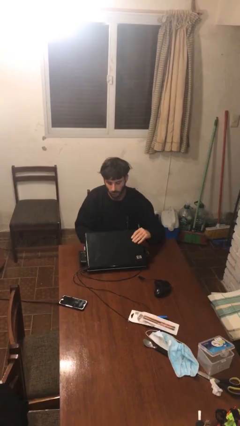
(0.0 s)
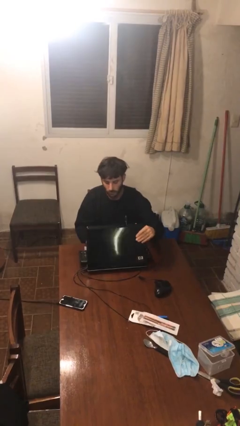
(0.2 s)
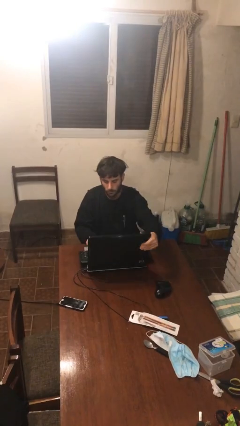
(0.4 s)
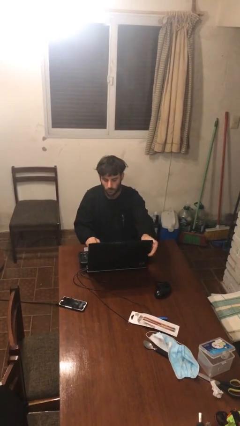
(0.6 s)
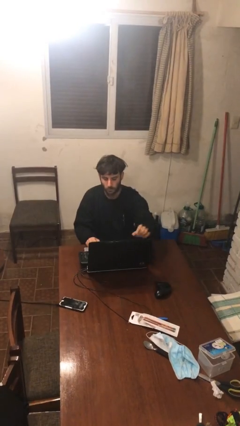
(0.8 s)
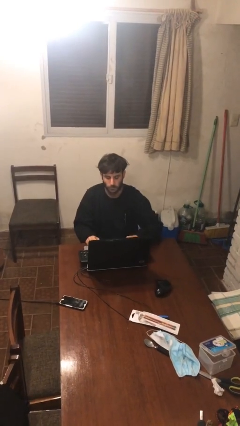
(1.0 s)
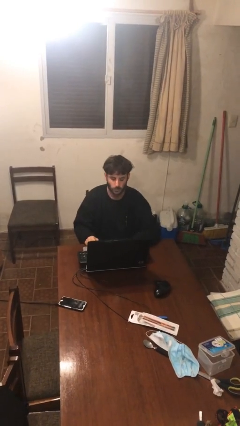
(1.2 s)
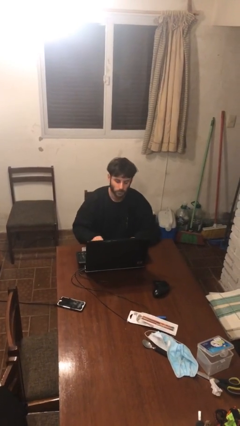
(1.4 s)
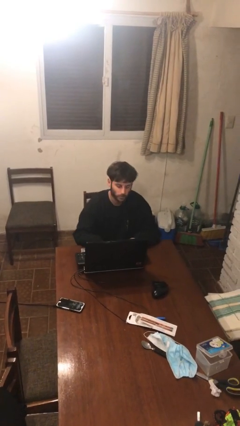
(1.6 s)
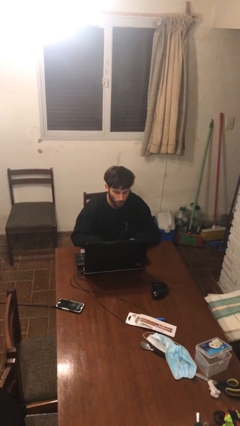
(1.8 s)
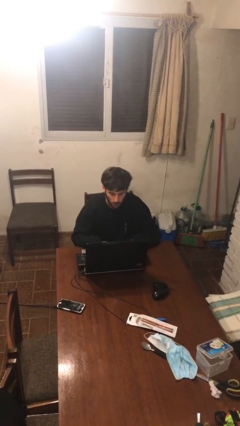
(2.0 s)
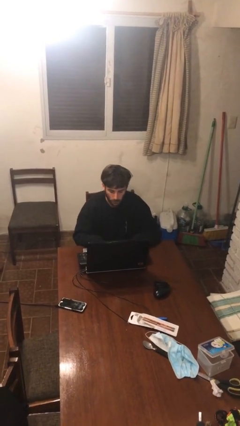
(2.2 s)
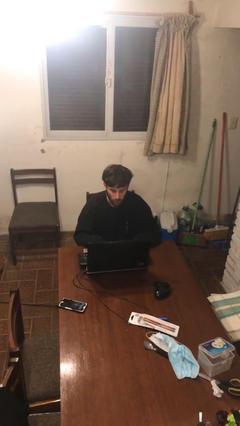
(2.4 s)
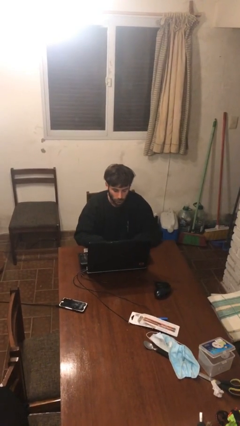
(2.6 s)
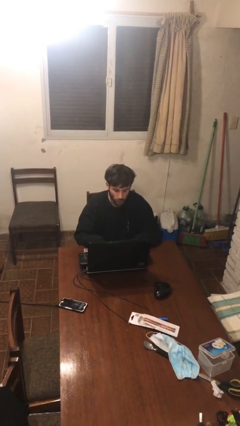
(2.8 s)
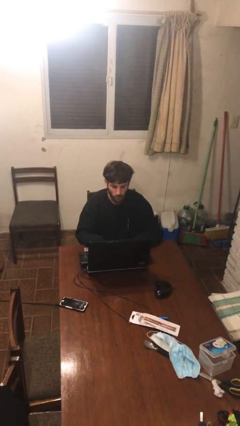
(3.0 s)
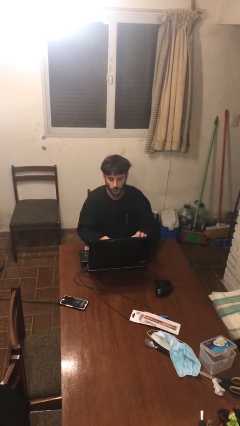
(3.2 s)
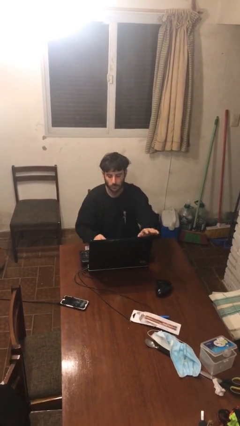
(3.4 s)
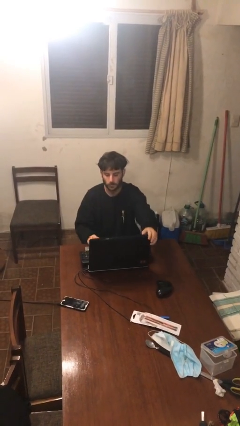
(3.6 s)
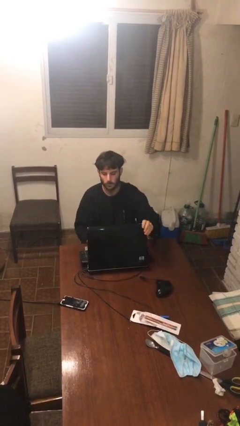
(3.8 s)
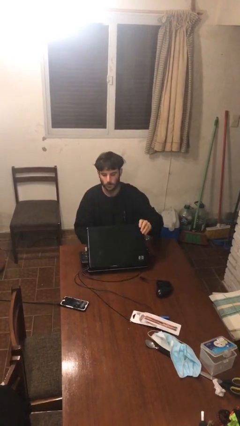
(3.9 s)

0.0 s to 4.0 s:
person interacts with laptop

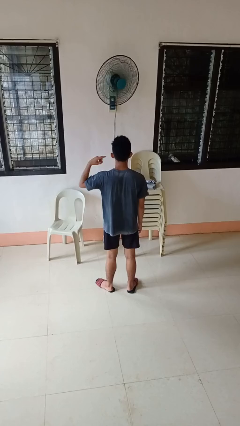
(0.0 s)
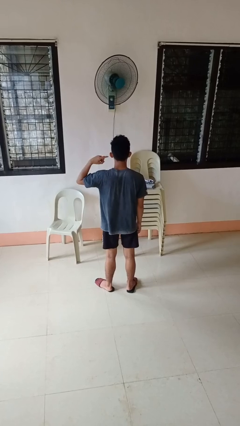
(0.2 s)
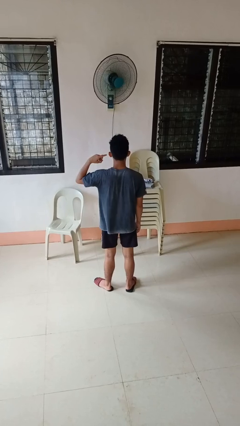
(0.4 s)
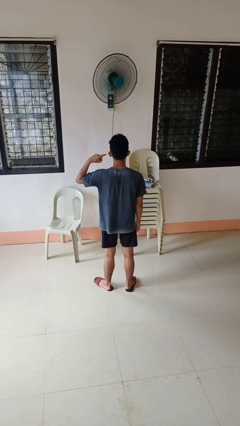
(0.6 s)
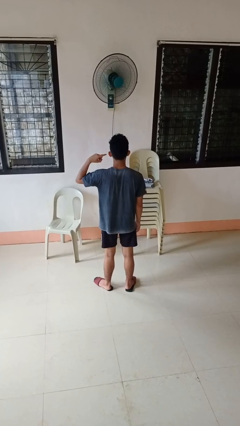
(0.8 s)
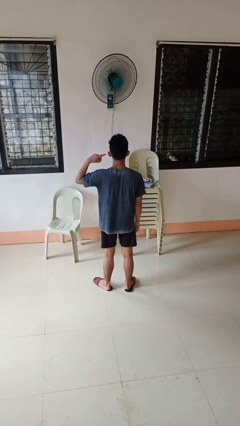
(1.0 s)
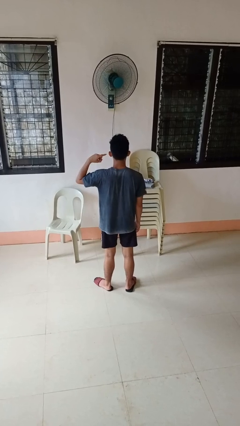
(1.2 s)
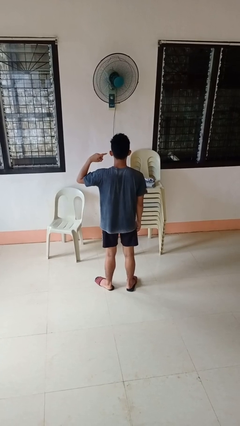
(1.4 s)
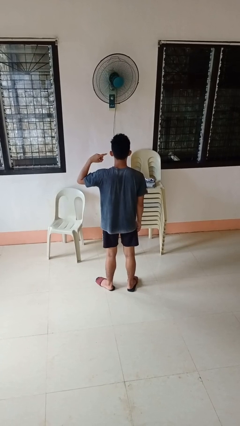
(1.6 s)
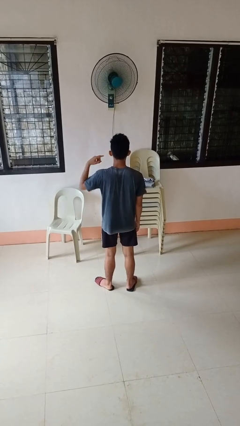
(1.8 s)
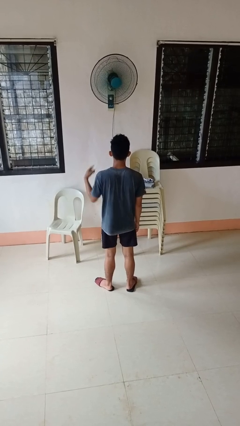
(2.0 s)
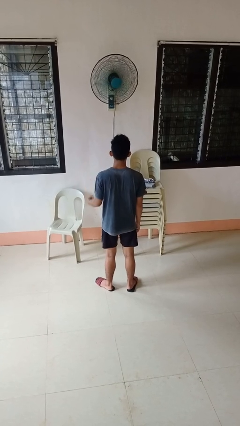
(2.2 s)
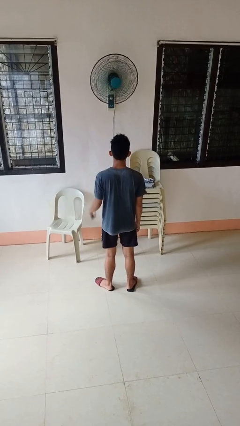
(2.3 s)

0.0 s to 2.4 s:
person gestures listen closely

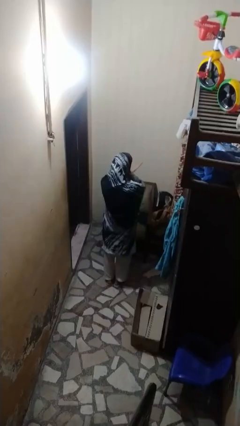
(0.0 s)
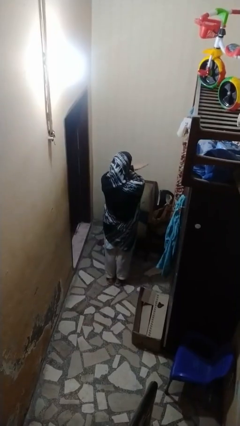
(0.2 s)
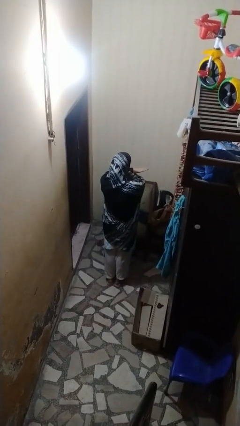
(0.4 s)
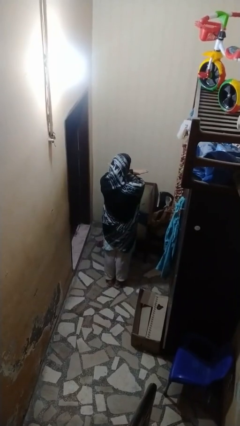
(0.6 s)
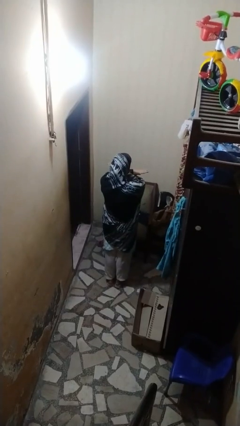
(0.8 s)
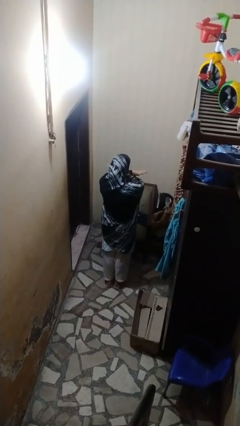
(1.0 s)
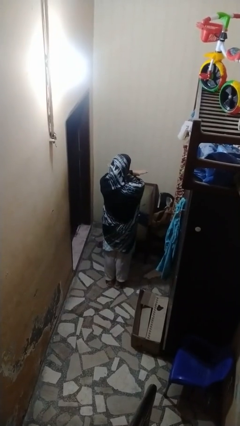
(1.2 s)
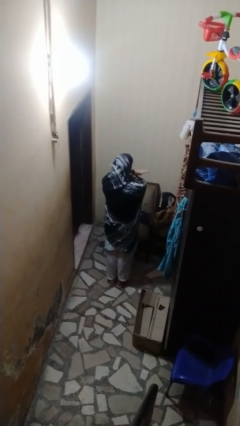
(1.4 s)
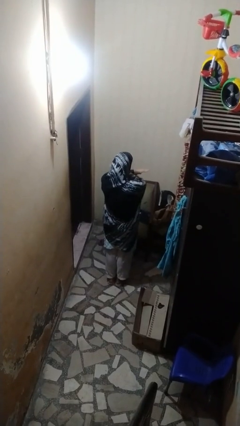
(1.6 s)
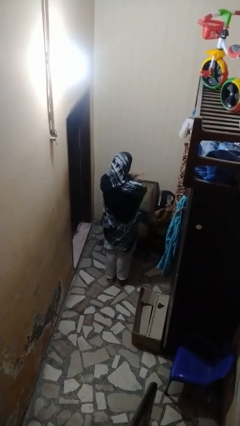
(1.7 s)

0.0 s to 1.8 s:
person gestures arms x

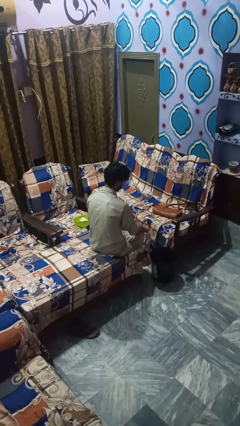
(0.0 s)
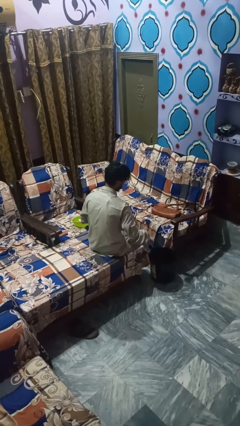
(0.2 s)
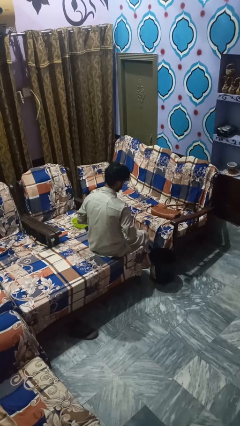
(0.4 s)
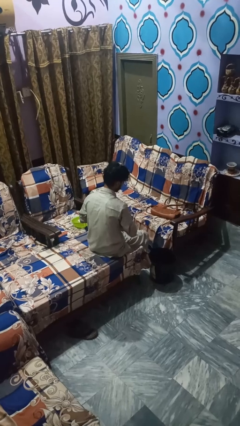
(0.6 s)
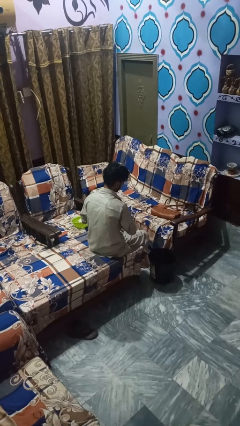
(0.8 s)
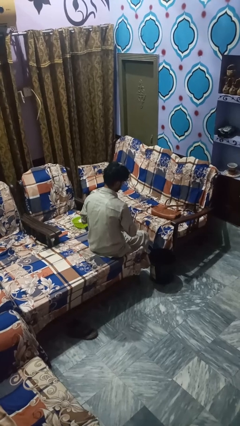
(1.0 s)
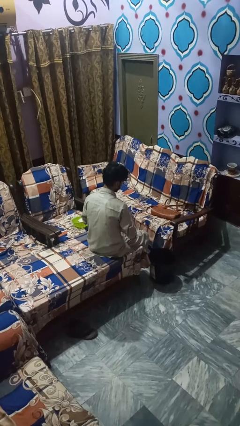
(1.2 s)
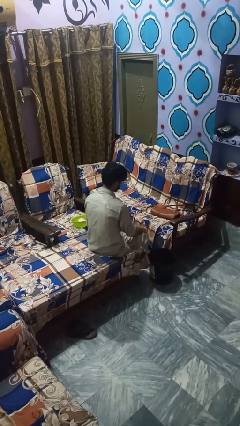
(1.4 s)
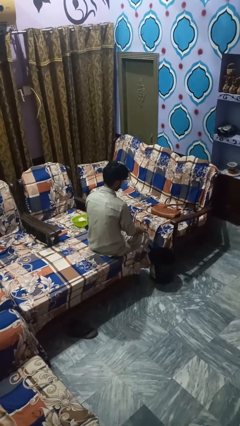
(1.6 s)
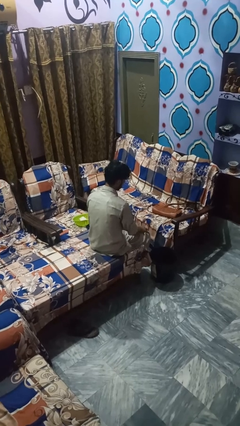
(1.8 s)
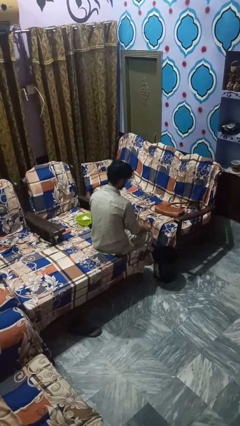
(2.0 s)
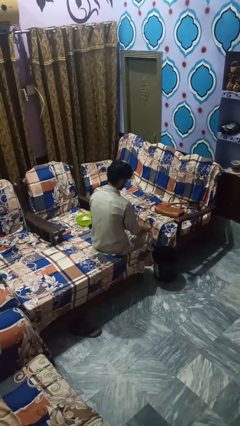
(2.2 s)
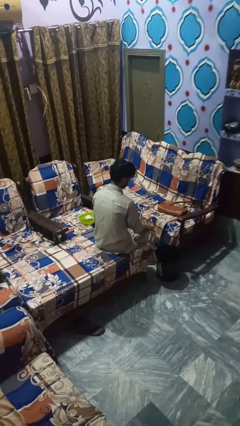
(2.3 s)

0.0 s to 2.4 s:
person buttons shirt

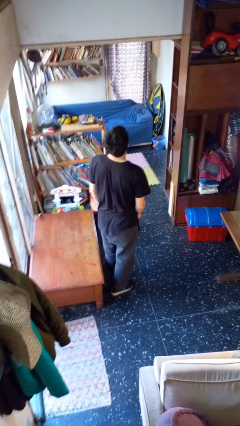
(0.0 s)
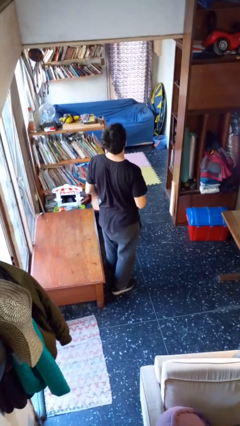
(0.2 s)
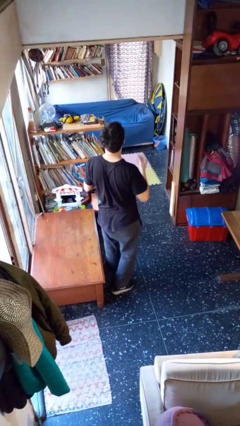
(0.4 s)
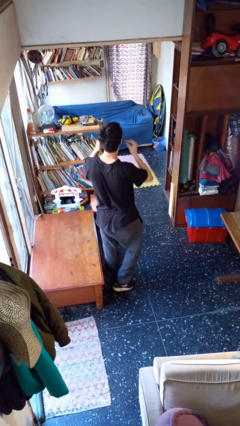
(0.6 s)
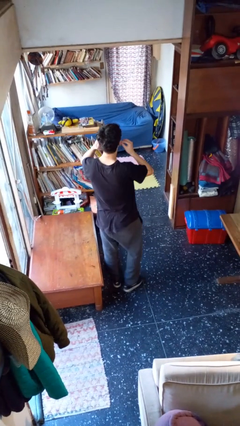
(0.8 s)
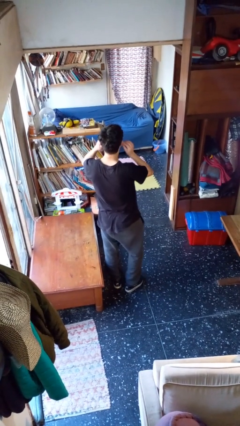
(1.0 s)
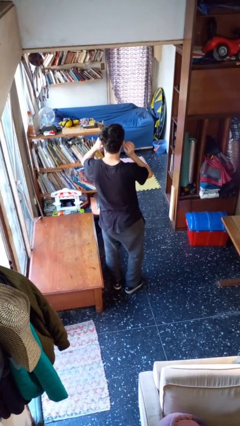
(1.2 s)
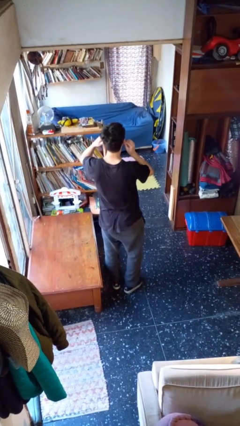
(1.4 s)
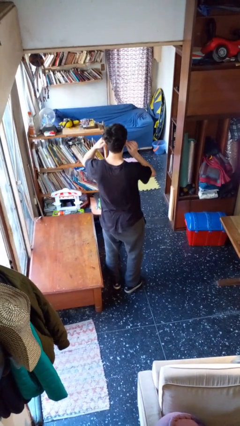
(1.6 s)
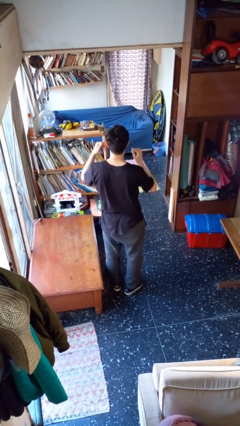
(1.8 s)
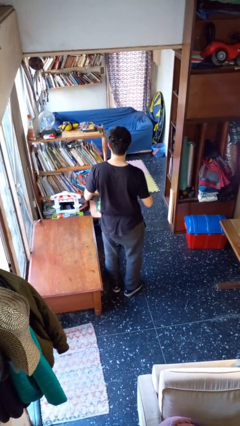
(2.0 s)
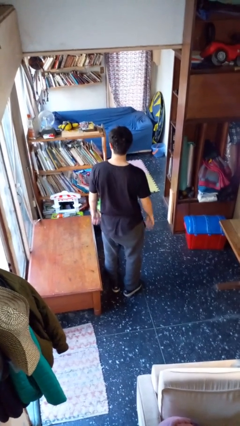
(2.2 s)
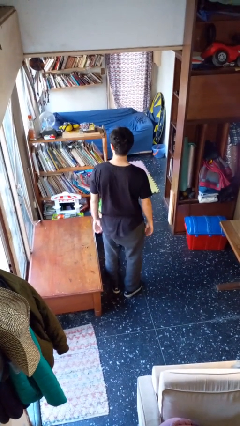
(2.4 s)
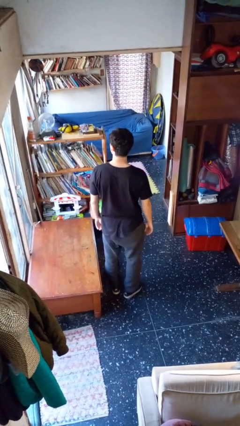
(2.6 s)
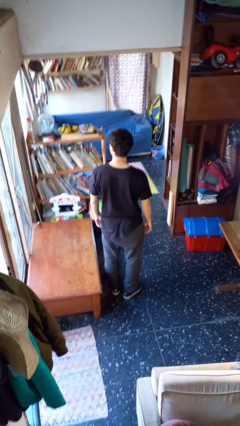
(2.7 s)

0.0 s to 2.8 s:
person puts on headphones

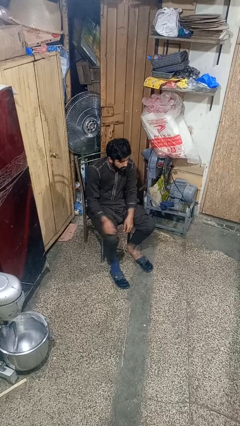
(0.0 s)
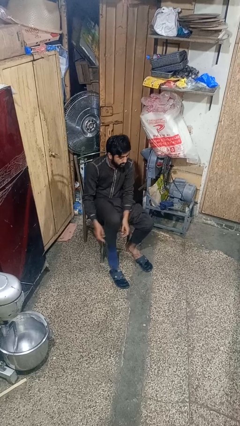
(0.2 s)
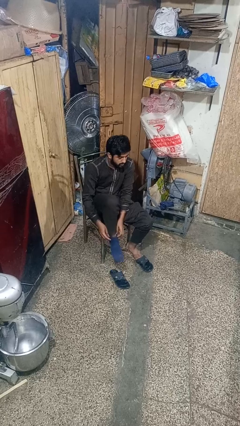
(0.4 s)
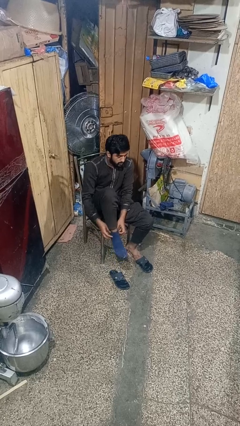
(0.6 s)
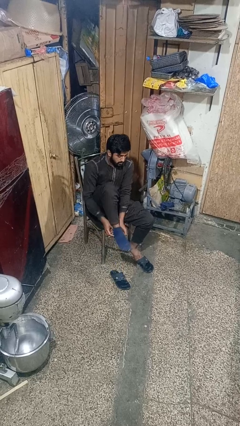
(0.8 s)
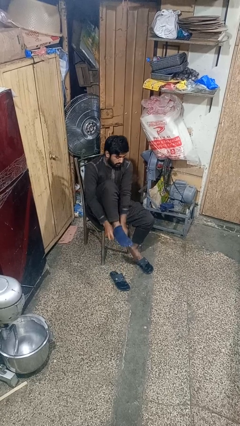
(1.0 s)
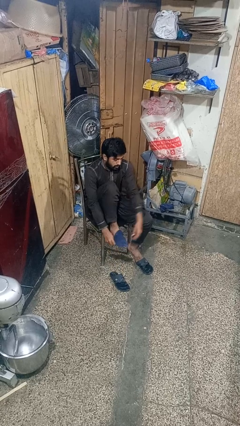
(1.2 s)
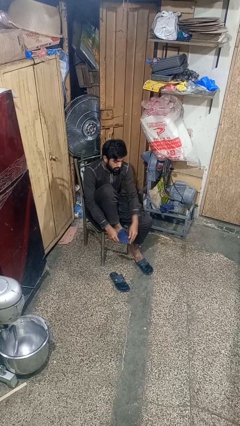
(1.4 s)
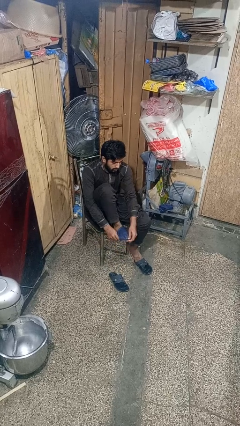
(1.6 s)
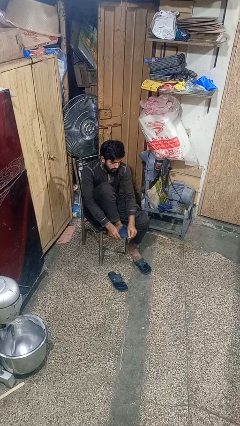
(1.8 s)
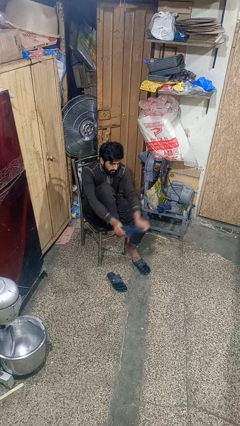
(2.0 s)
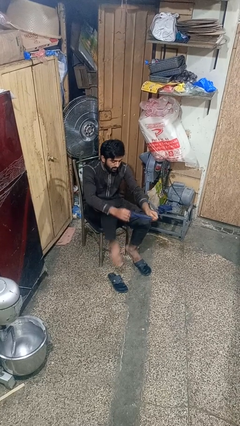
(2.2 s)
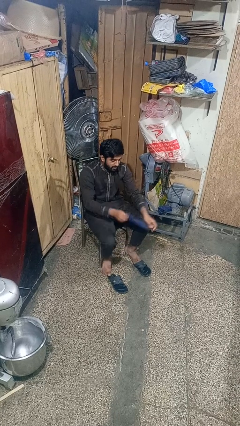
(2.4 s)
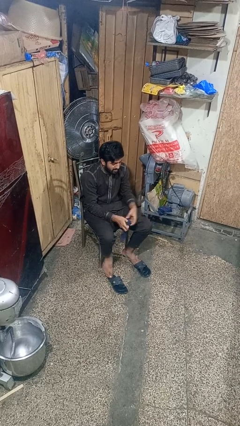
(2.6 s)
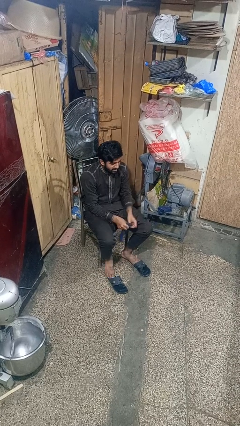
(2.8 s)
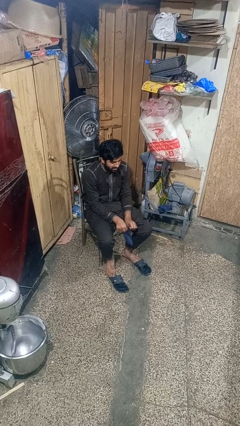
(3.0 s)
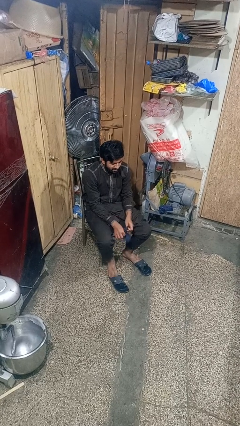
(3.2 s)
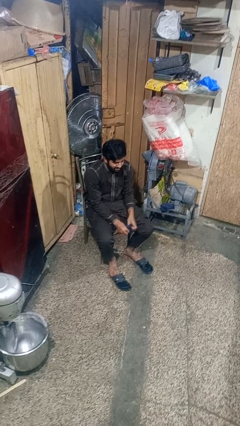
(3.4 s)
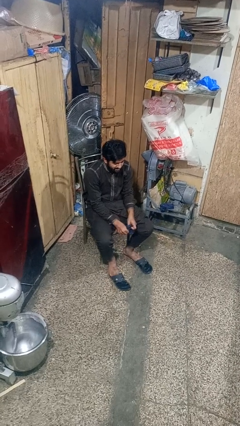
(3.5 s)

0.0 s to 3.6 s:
person takes off socks

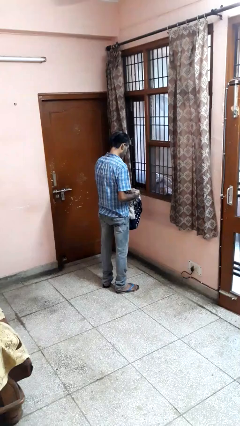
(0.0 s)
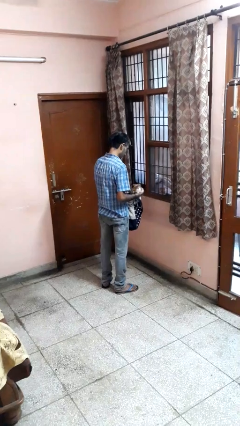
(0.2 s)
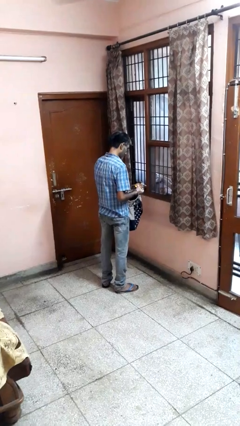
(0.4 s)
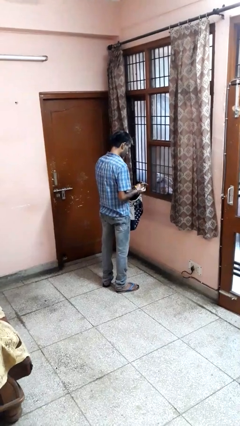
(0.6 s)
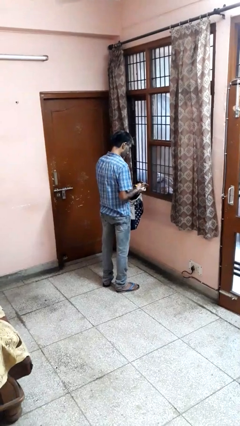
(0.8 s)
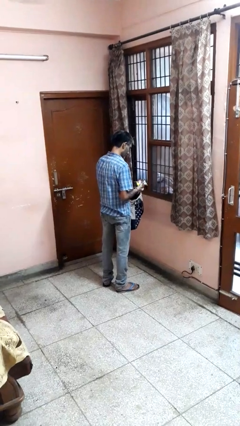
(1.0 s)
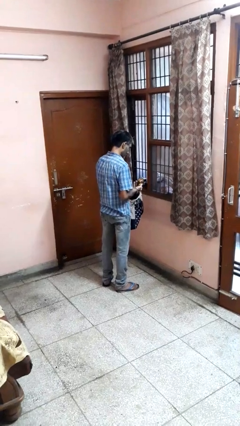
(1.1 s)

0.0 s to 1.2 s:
person takes object from bag
